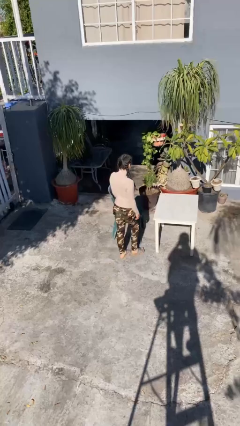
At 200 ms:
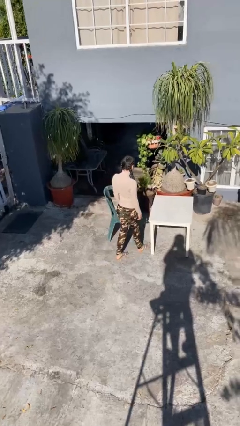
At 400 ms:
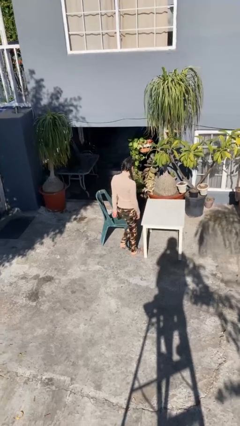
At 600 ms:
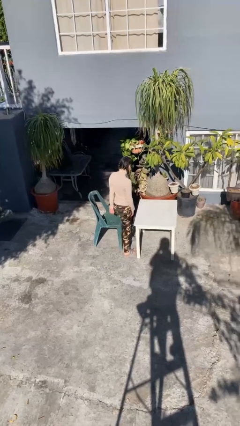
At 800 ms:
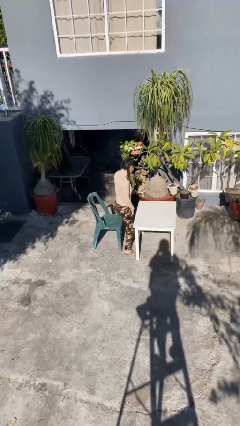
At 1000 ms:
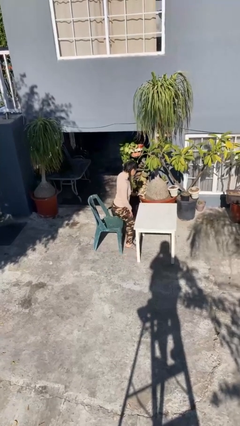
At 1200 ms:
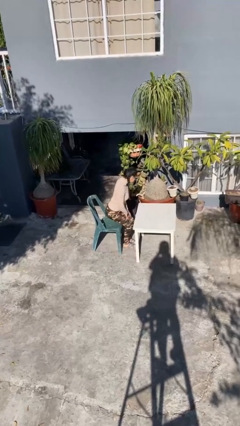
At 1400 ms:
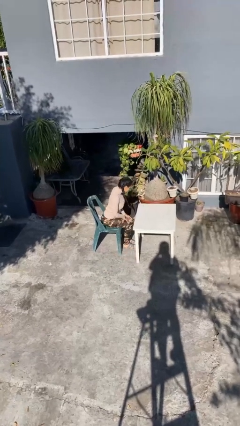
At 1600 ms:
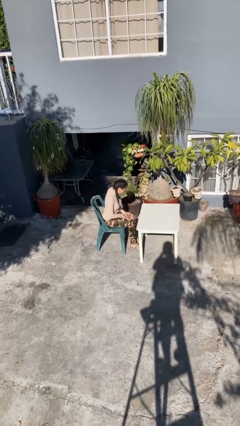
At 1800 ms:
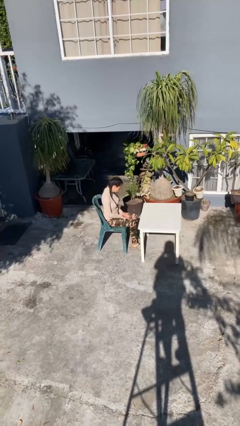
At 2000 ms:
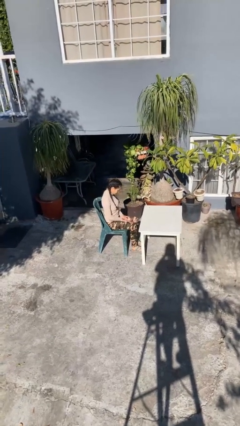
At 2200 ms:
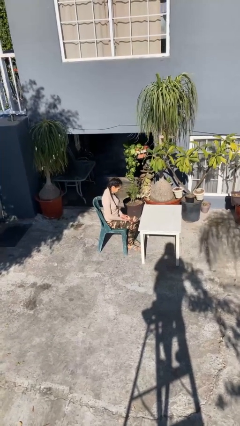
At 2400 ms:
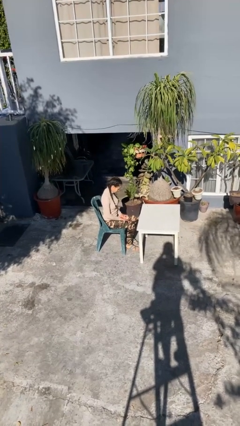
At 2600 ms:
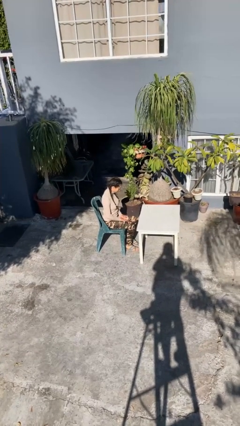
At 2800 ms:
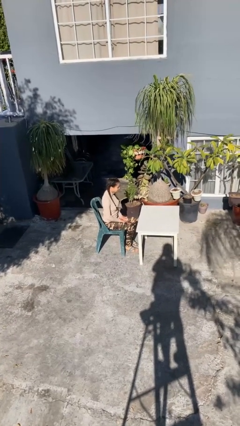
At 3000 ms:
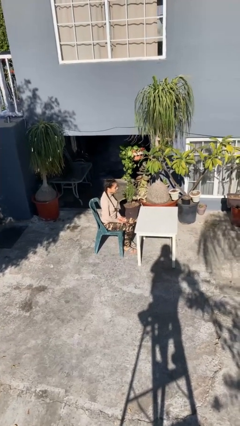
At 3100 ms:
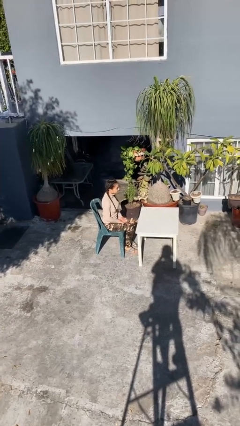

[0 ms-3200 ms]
person sits down

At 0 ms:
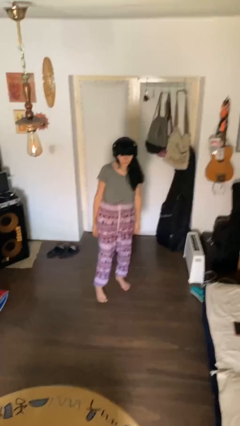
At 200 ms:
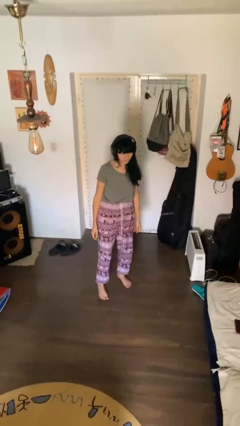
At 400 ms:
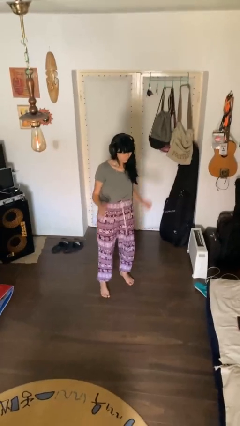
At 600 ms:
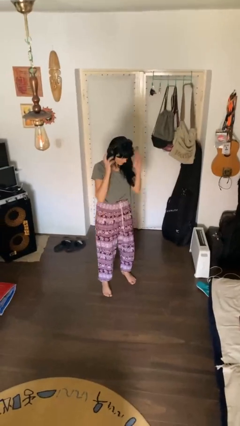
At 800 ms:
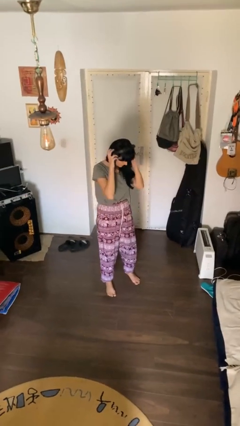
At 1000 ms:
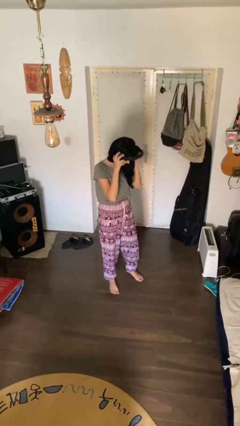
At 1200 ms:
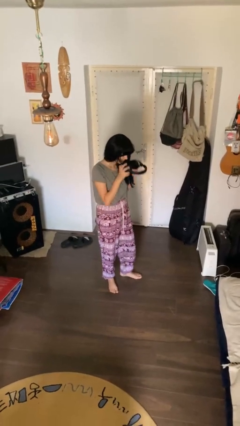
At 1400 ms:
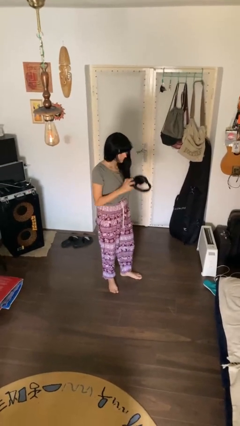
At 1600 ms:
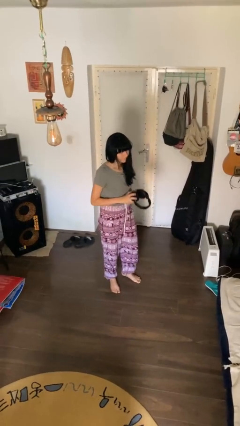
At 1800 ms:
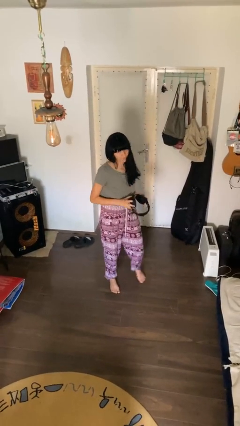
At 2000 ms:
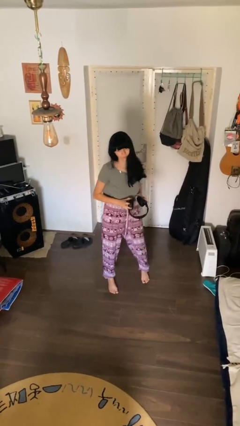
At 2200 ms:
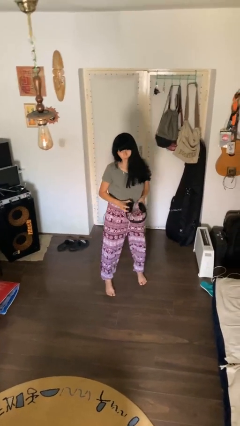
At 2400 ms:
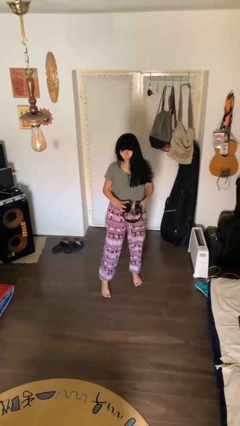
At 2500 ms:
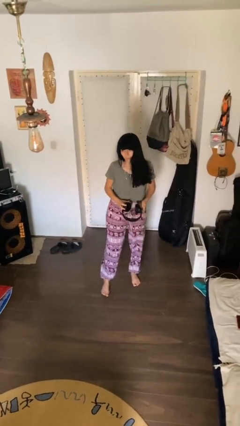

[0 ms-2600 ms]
person takes off headphones

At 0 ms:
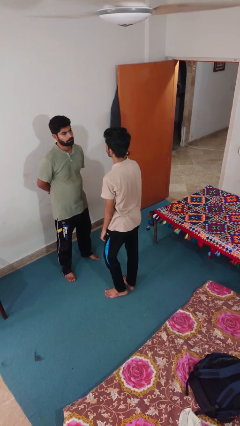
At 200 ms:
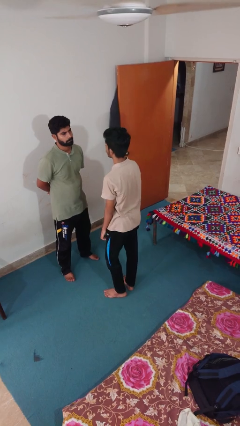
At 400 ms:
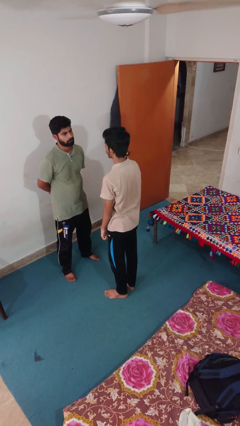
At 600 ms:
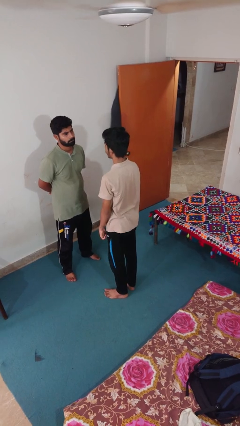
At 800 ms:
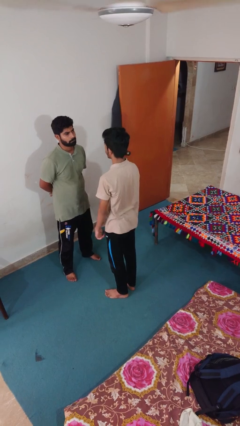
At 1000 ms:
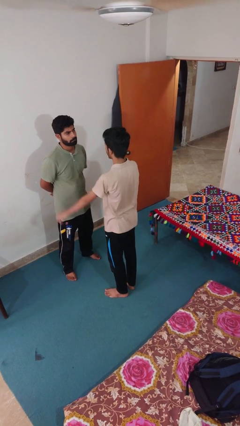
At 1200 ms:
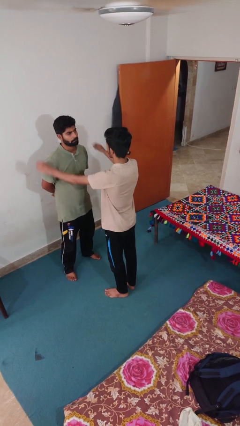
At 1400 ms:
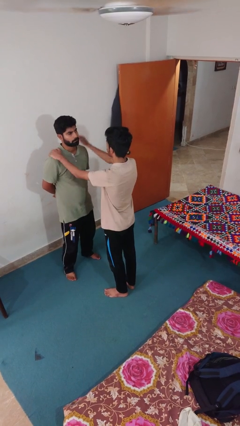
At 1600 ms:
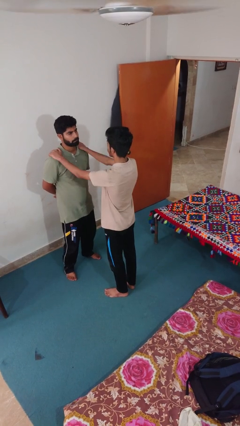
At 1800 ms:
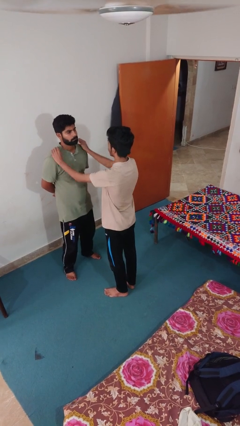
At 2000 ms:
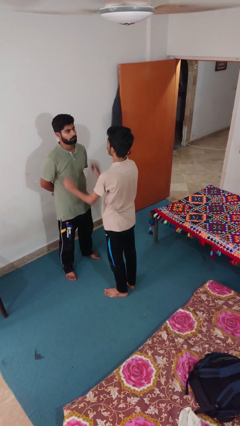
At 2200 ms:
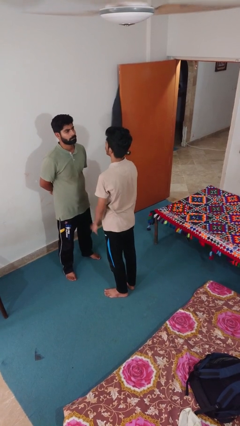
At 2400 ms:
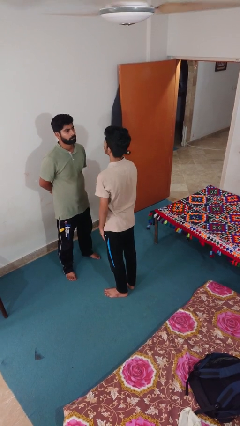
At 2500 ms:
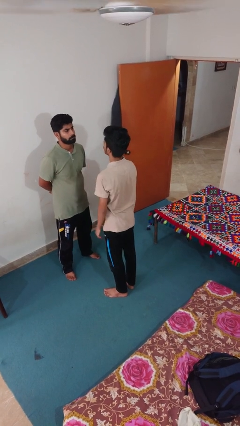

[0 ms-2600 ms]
person pounds shoulders of person

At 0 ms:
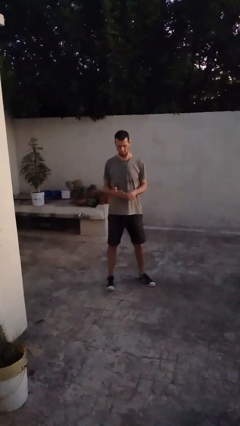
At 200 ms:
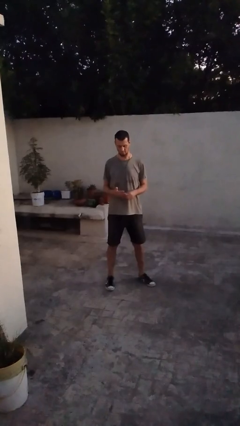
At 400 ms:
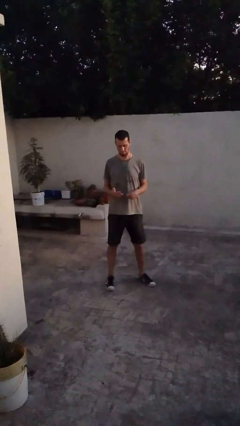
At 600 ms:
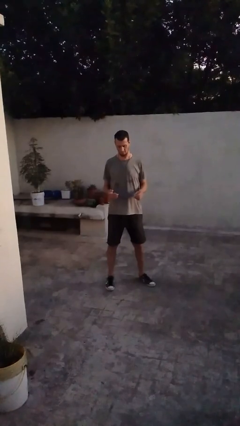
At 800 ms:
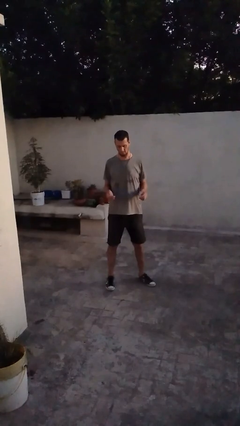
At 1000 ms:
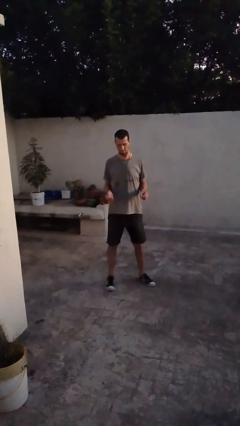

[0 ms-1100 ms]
person takes off ring

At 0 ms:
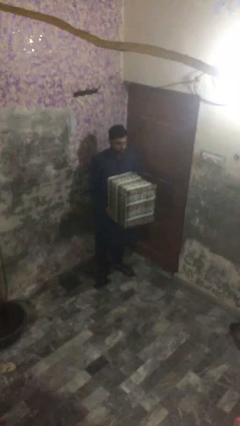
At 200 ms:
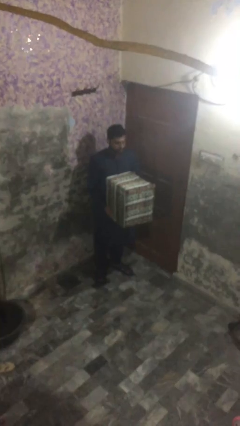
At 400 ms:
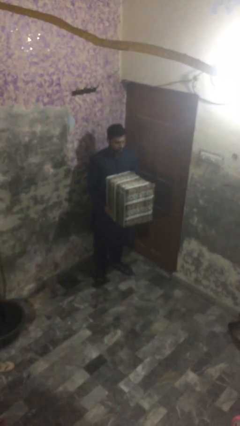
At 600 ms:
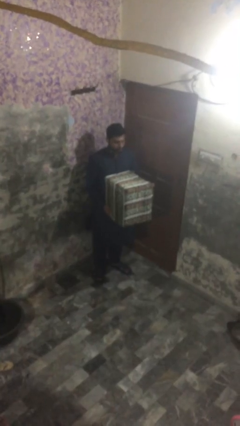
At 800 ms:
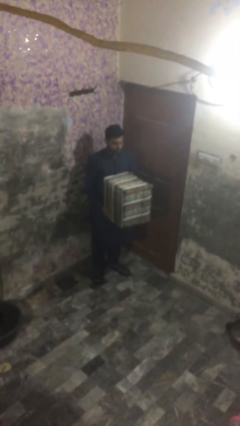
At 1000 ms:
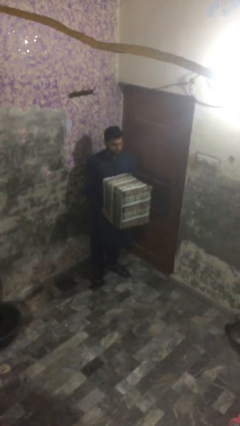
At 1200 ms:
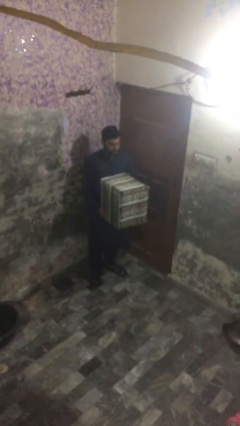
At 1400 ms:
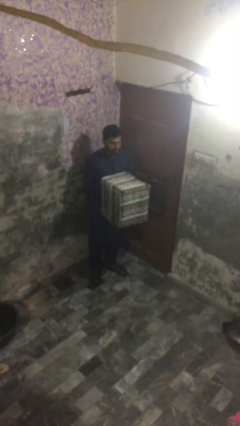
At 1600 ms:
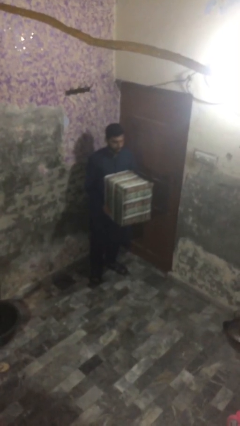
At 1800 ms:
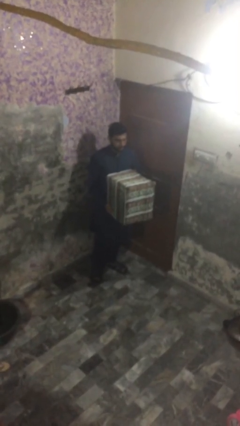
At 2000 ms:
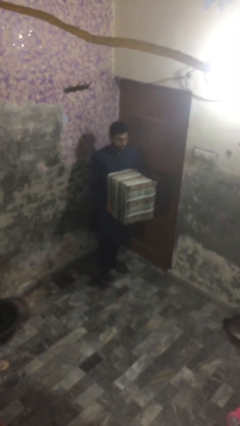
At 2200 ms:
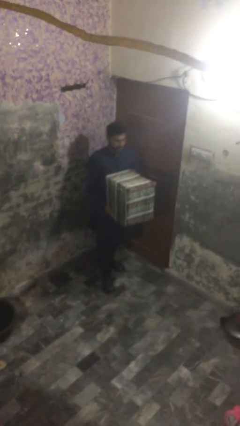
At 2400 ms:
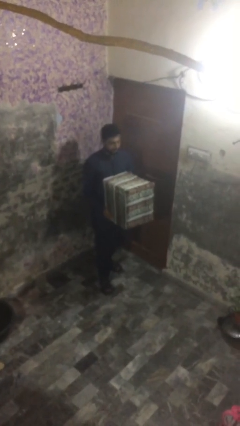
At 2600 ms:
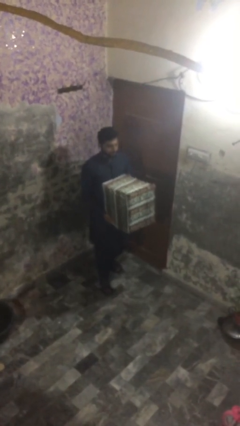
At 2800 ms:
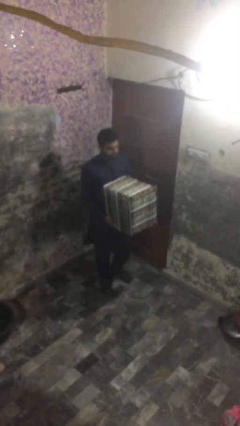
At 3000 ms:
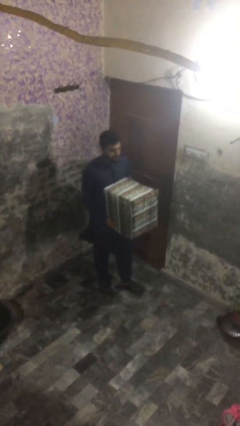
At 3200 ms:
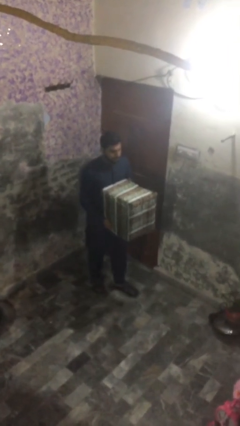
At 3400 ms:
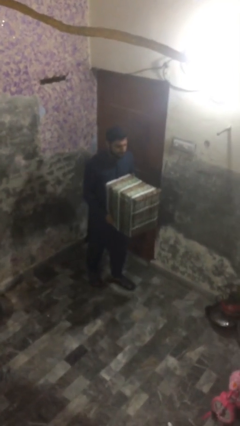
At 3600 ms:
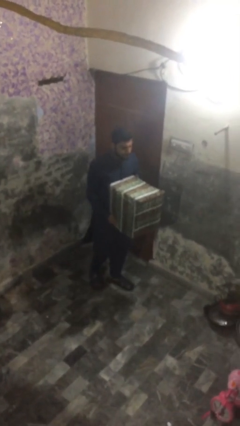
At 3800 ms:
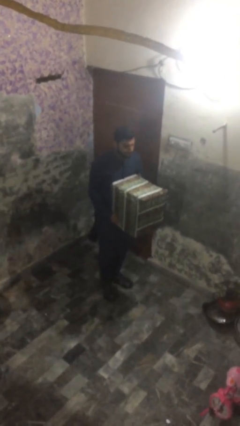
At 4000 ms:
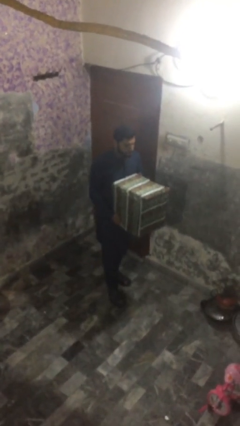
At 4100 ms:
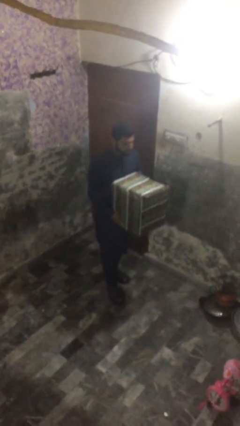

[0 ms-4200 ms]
person carries heavy object

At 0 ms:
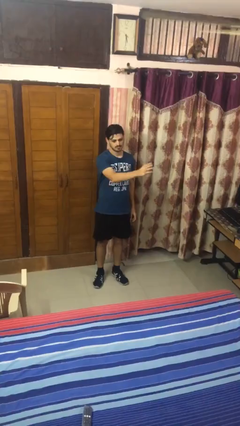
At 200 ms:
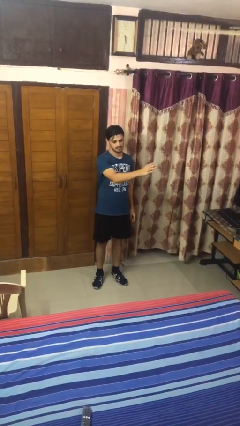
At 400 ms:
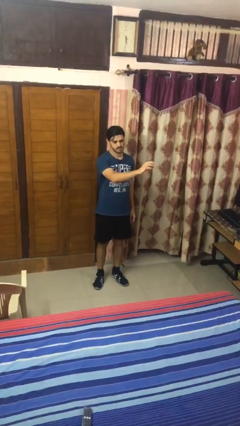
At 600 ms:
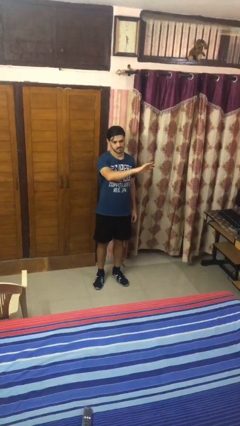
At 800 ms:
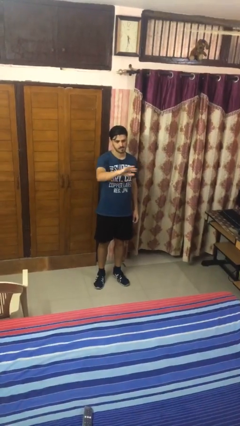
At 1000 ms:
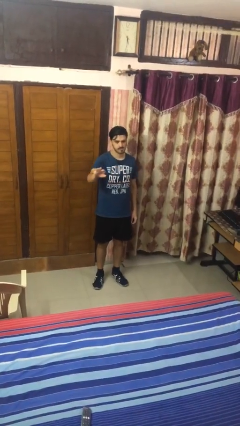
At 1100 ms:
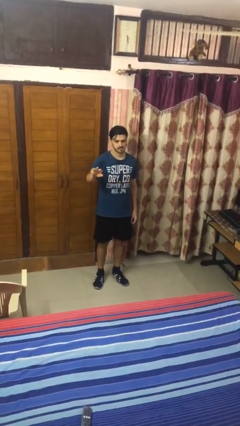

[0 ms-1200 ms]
person gestures swipe right

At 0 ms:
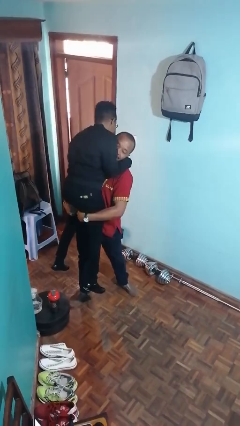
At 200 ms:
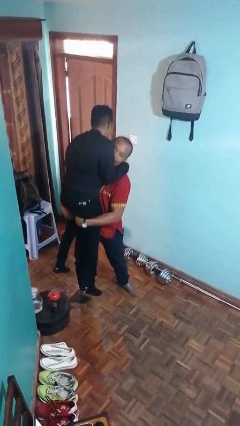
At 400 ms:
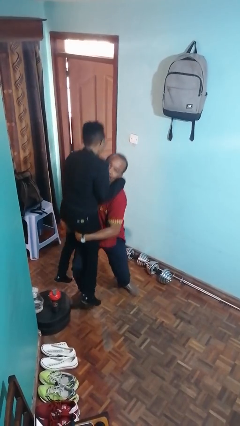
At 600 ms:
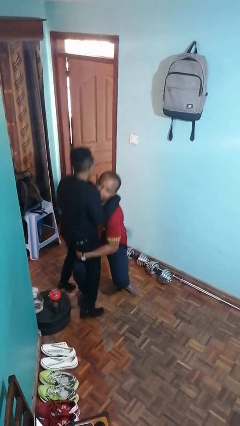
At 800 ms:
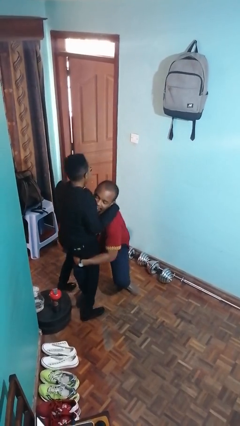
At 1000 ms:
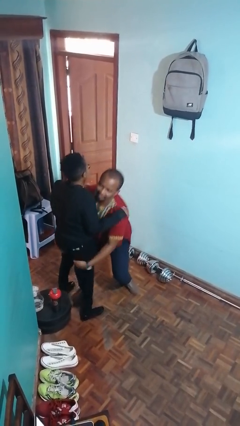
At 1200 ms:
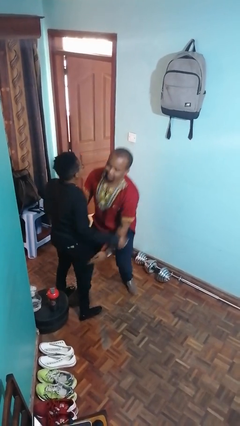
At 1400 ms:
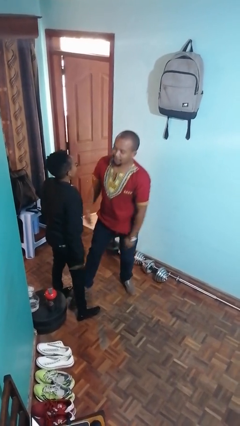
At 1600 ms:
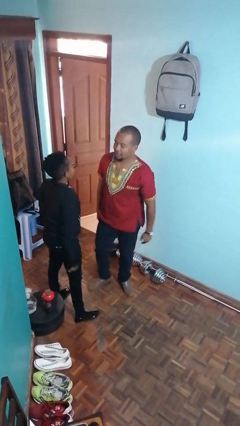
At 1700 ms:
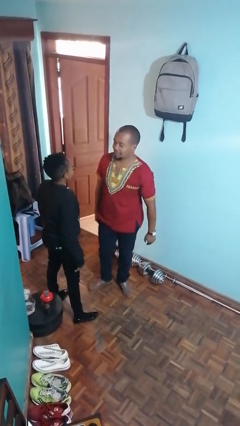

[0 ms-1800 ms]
person puts down person

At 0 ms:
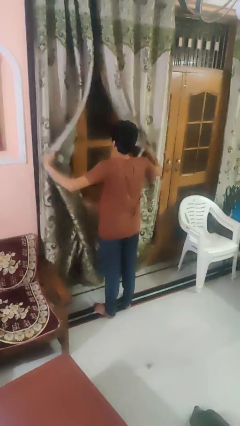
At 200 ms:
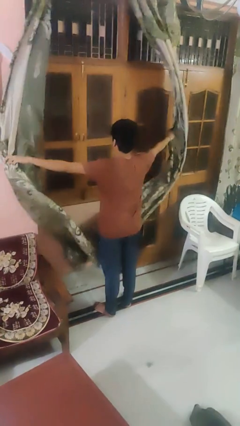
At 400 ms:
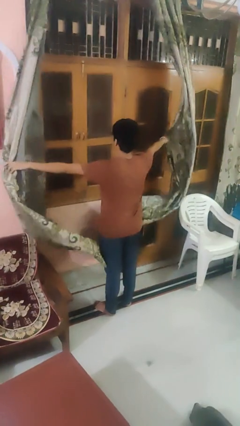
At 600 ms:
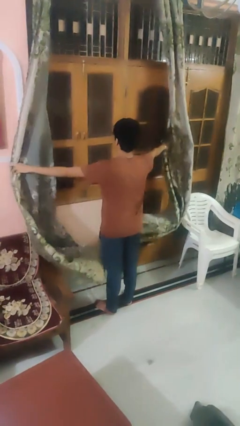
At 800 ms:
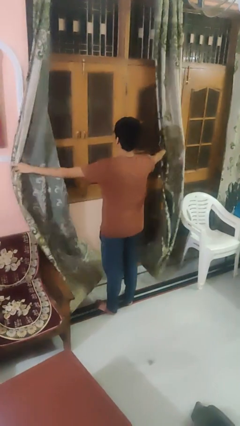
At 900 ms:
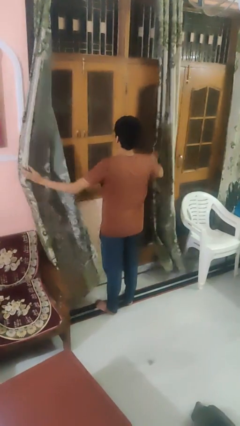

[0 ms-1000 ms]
person opens curtains
